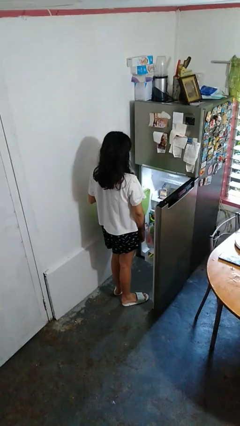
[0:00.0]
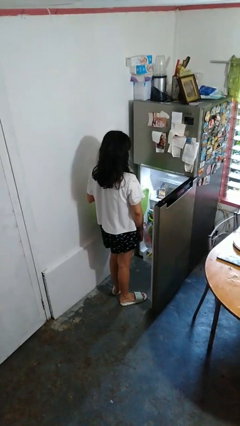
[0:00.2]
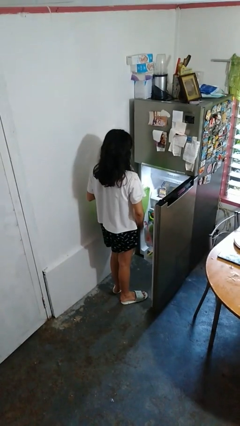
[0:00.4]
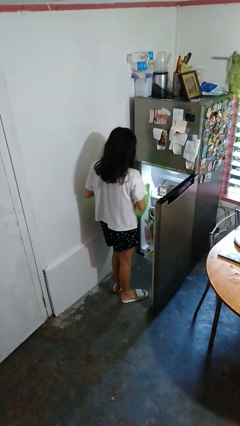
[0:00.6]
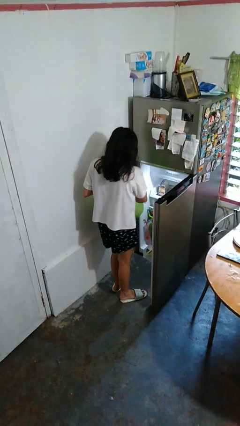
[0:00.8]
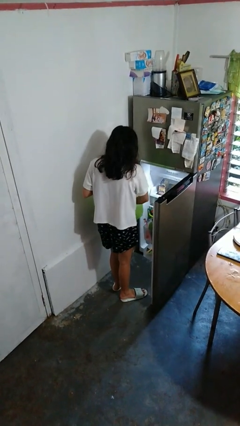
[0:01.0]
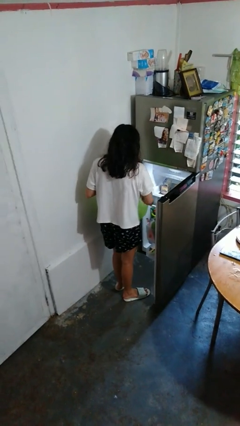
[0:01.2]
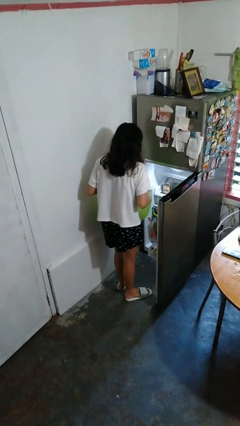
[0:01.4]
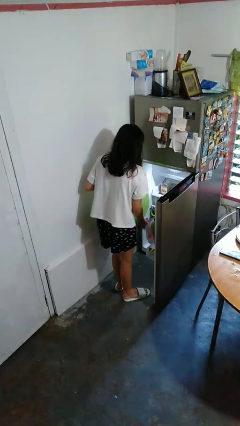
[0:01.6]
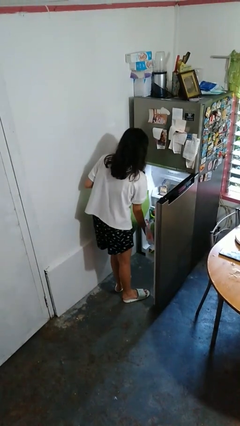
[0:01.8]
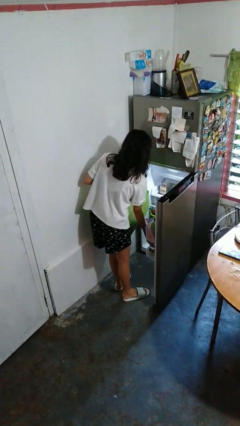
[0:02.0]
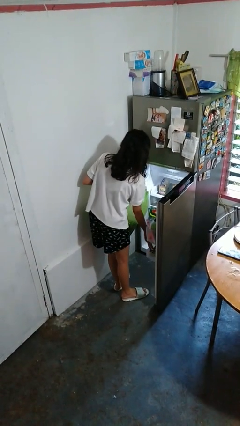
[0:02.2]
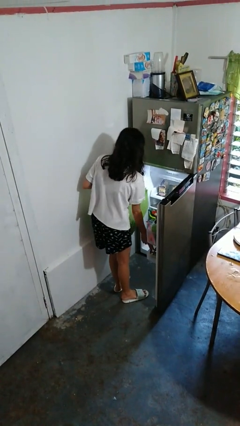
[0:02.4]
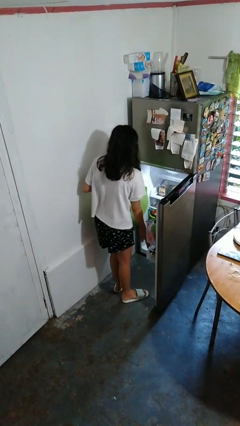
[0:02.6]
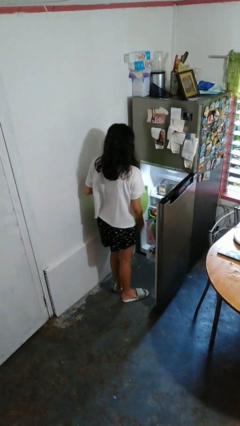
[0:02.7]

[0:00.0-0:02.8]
person loads groceries into refrigerator

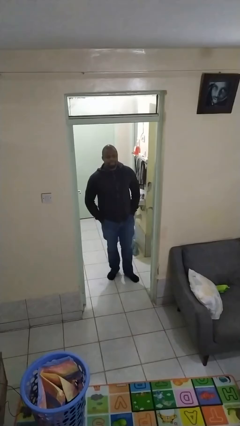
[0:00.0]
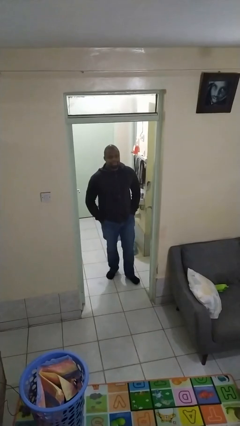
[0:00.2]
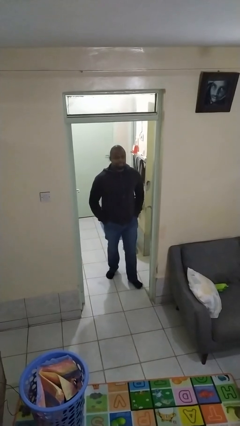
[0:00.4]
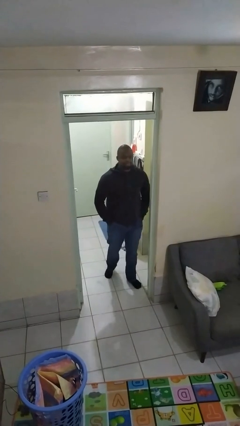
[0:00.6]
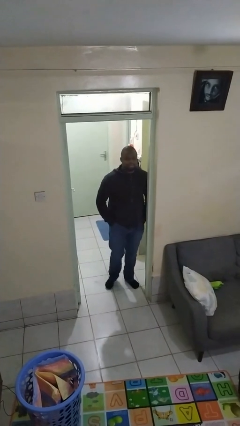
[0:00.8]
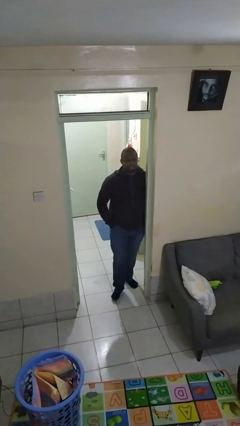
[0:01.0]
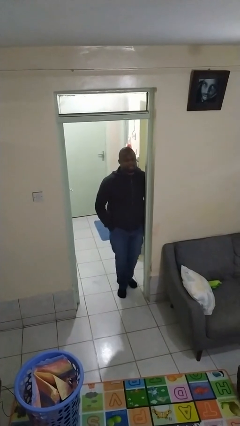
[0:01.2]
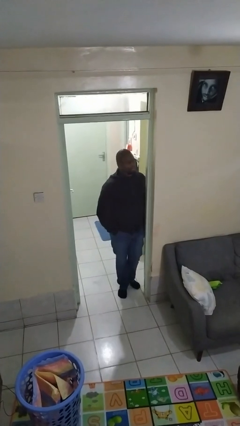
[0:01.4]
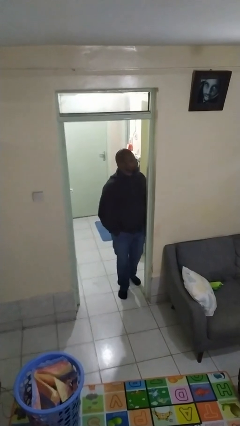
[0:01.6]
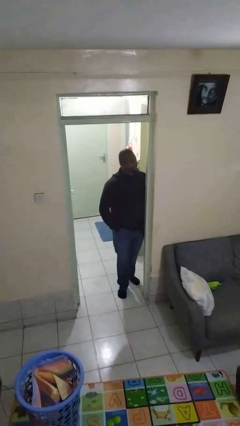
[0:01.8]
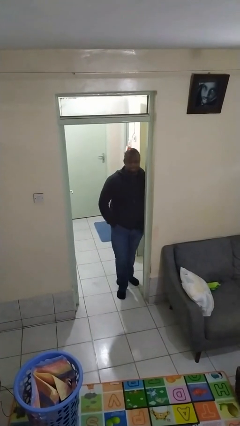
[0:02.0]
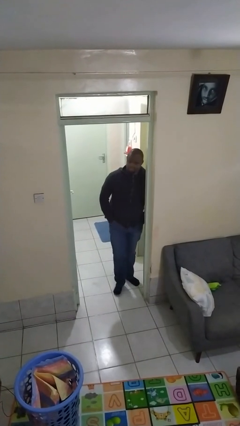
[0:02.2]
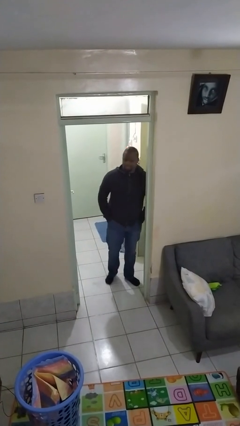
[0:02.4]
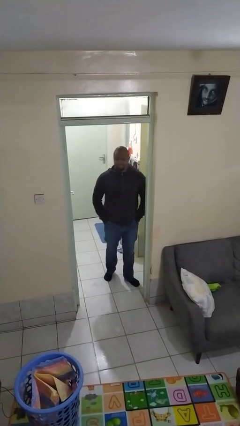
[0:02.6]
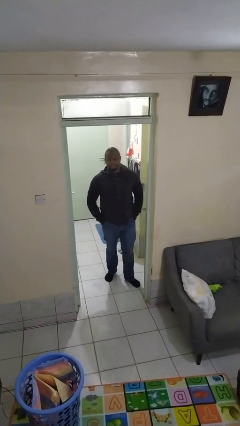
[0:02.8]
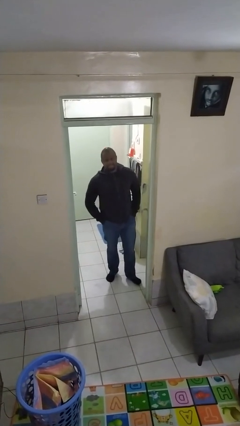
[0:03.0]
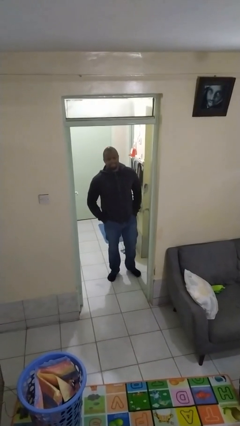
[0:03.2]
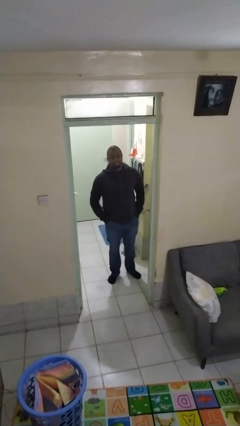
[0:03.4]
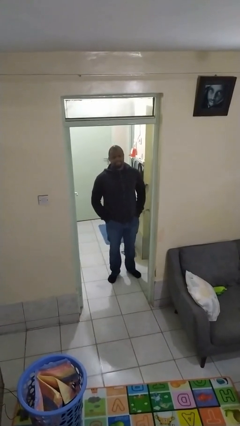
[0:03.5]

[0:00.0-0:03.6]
person bumps into wall

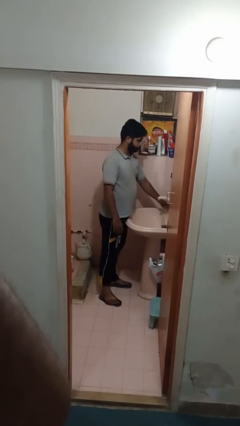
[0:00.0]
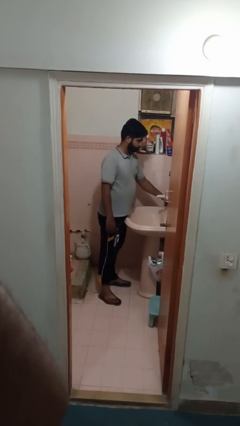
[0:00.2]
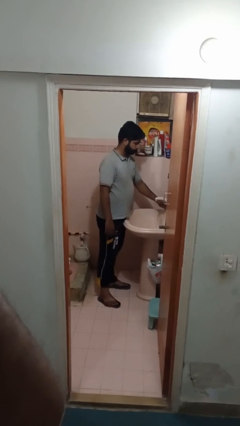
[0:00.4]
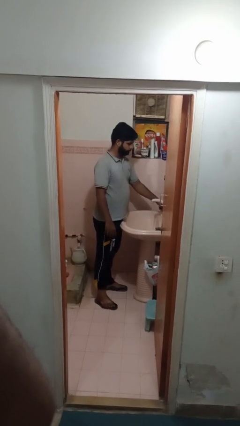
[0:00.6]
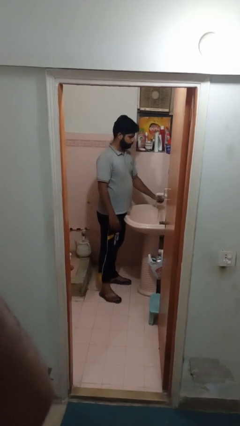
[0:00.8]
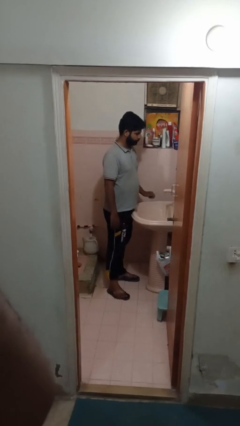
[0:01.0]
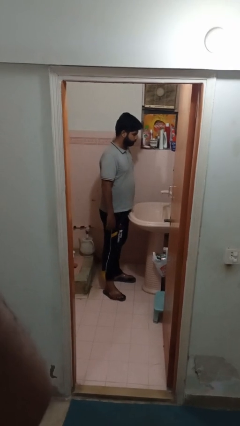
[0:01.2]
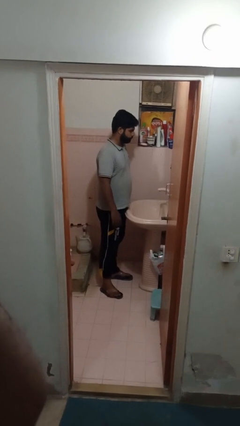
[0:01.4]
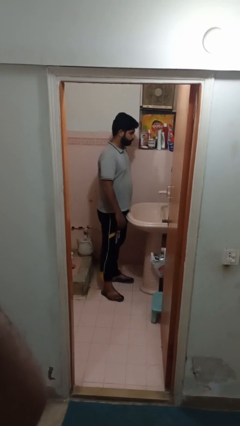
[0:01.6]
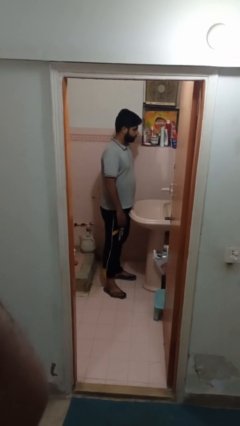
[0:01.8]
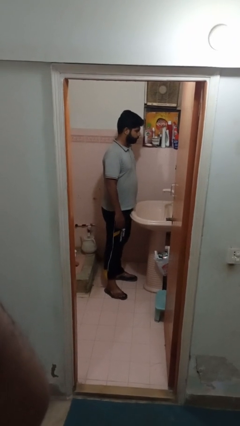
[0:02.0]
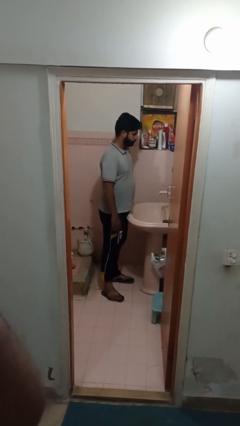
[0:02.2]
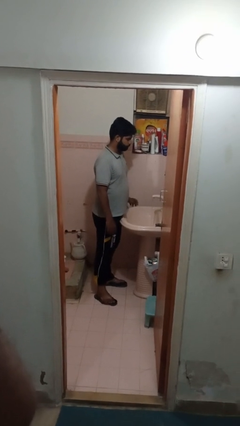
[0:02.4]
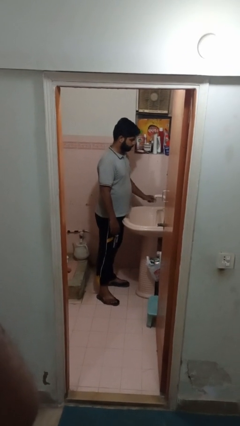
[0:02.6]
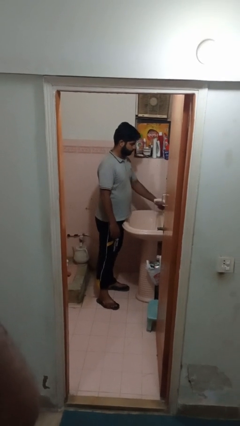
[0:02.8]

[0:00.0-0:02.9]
person turns on faucet

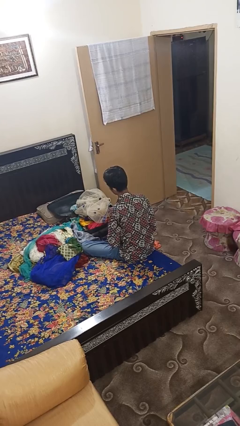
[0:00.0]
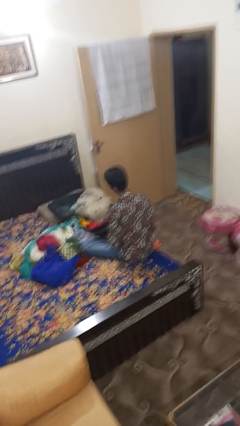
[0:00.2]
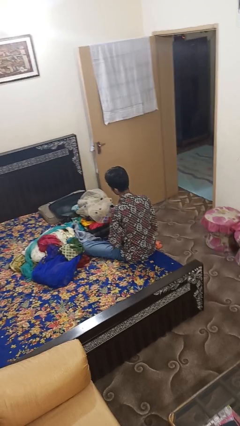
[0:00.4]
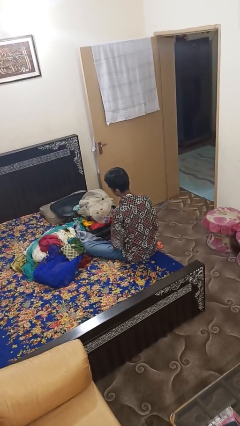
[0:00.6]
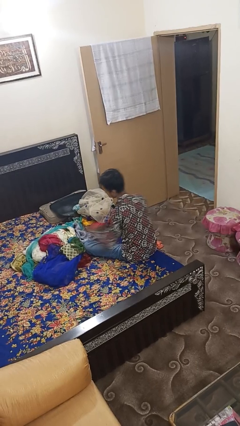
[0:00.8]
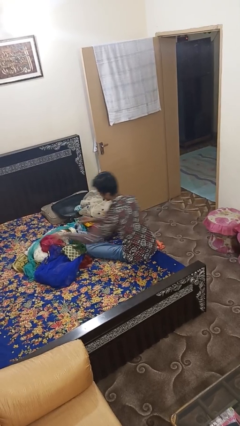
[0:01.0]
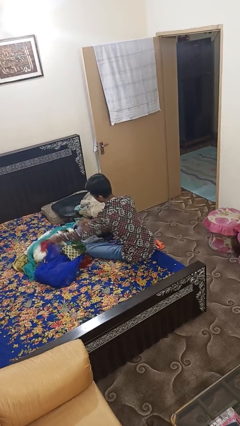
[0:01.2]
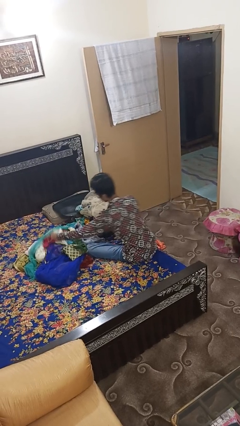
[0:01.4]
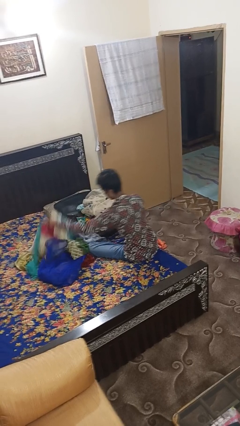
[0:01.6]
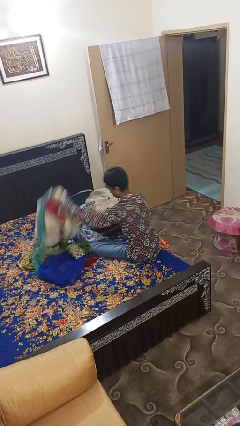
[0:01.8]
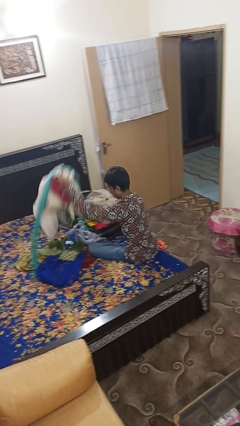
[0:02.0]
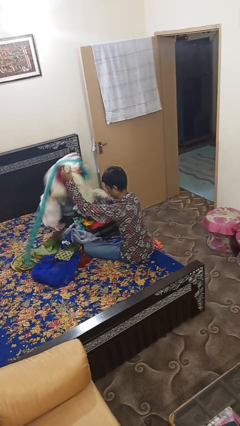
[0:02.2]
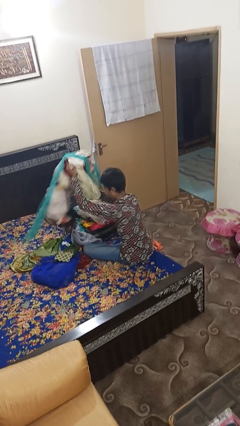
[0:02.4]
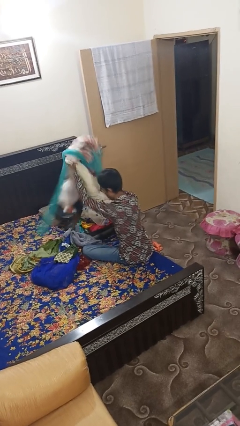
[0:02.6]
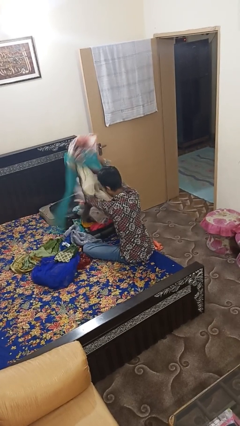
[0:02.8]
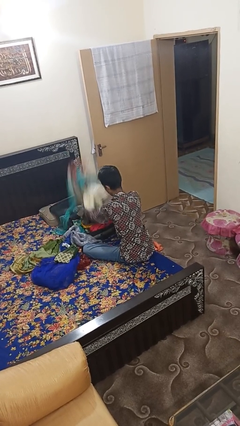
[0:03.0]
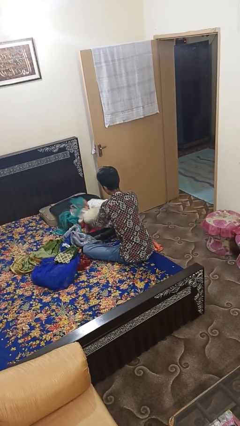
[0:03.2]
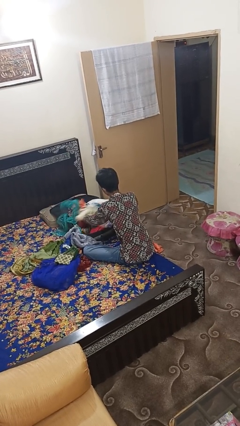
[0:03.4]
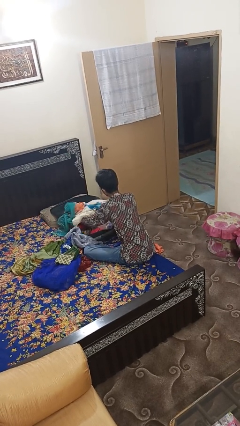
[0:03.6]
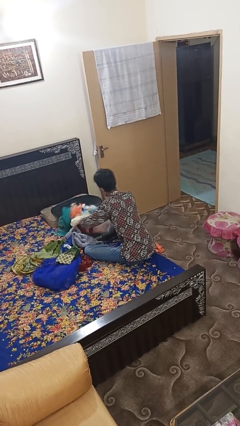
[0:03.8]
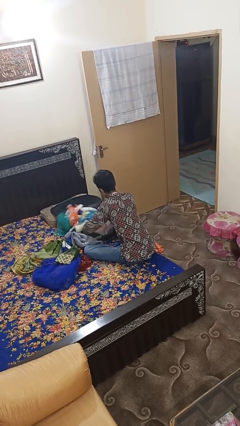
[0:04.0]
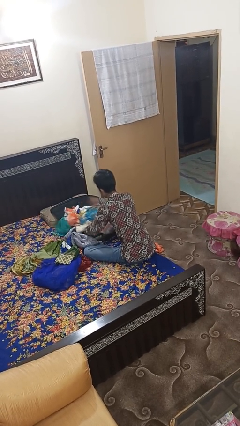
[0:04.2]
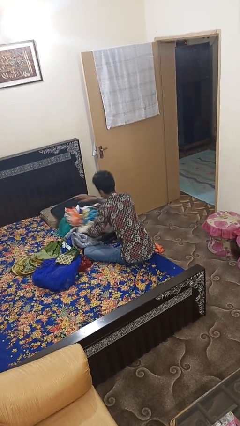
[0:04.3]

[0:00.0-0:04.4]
person loads clothes into suitcase

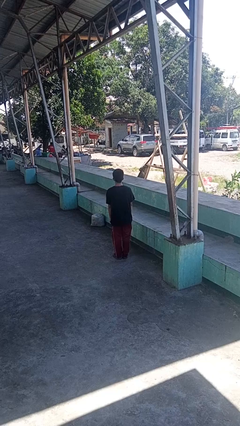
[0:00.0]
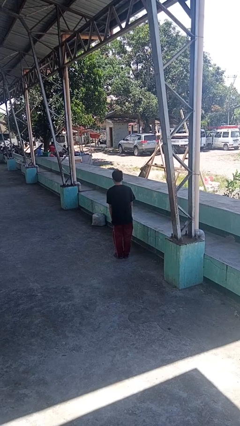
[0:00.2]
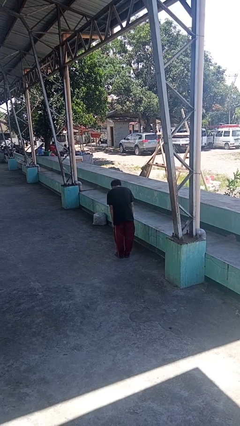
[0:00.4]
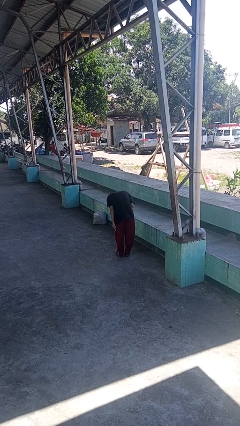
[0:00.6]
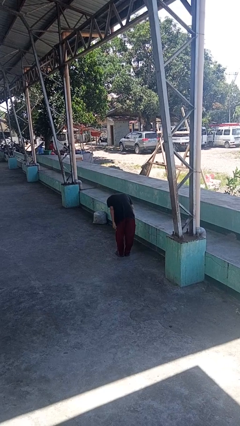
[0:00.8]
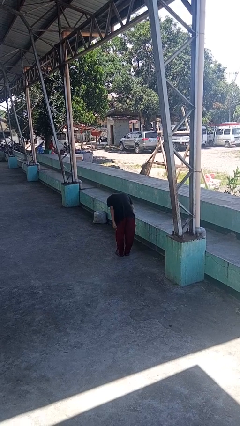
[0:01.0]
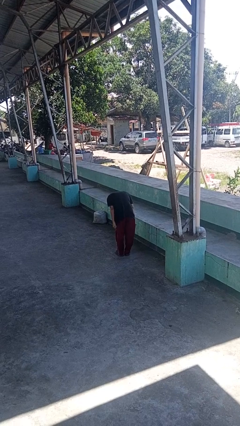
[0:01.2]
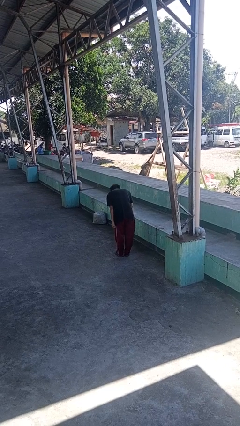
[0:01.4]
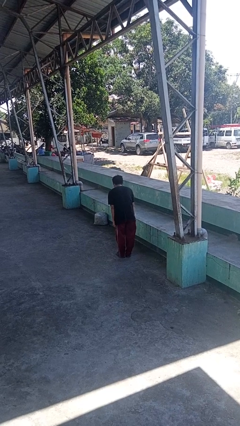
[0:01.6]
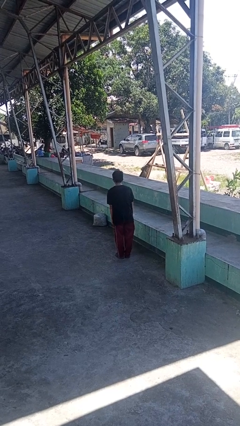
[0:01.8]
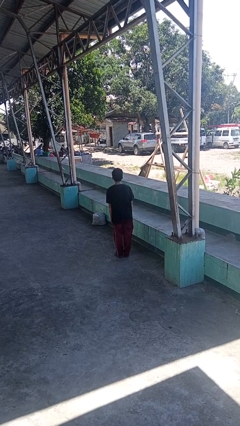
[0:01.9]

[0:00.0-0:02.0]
person bows

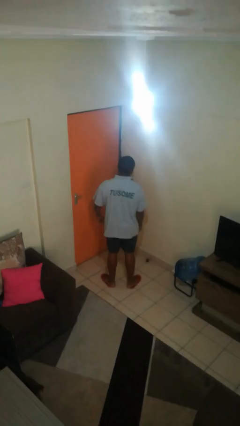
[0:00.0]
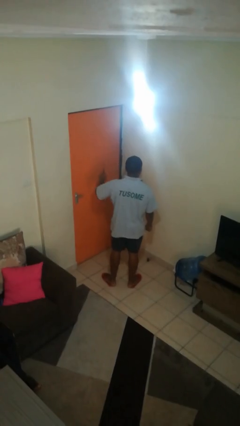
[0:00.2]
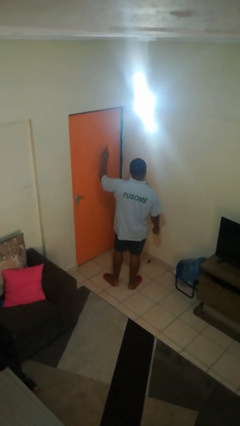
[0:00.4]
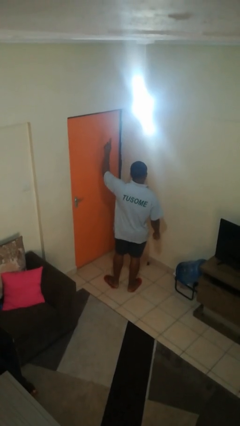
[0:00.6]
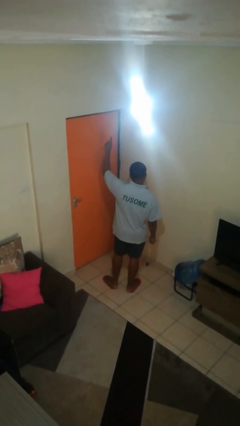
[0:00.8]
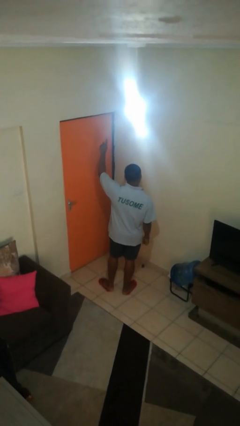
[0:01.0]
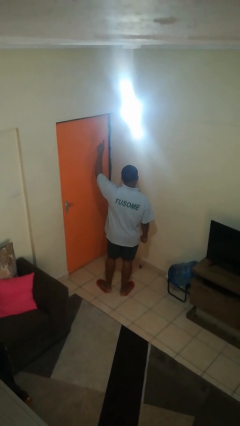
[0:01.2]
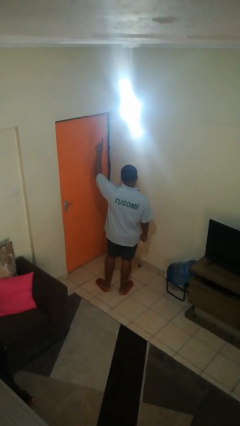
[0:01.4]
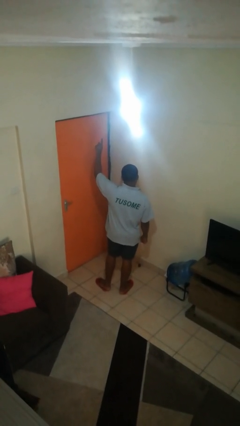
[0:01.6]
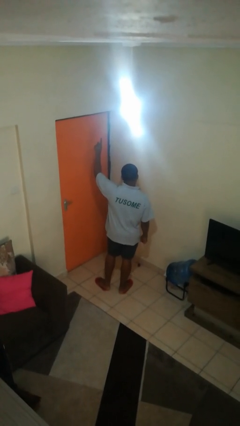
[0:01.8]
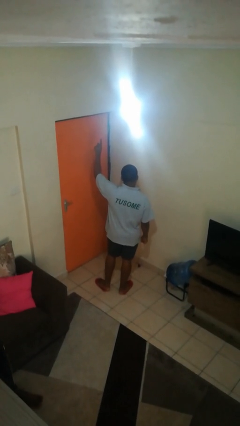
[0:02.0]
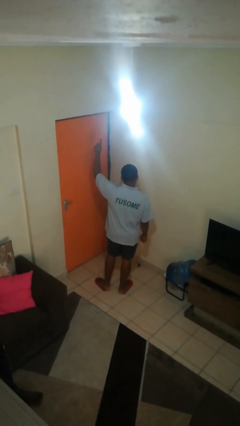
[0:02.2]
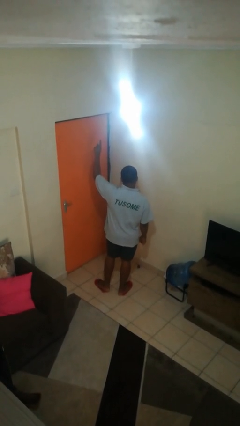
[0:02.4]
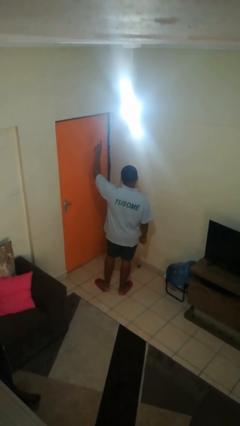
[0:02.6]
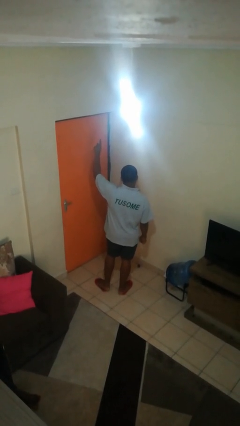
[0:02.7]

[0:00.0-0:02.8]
person gestures number one
